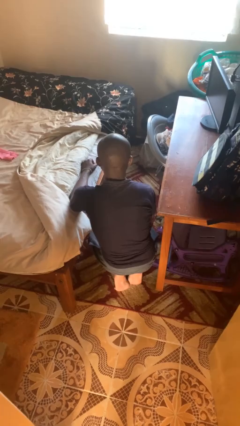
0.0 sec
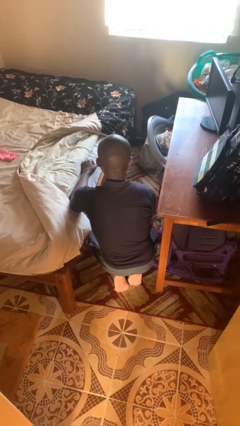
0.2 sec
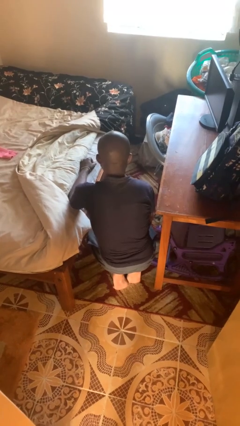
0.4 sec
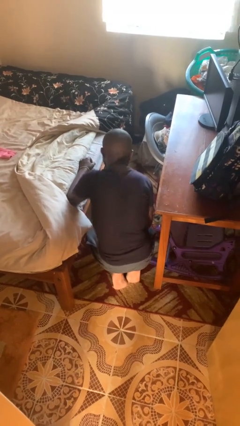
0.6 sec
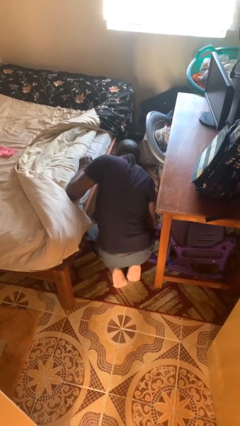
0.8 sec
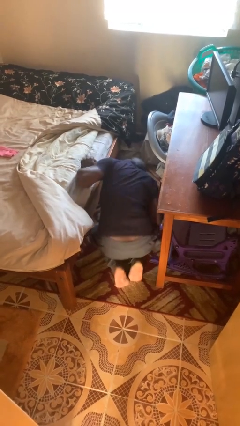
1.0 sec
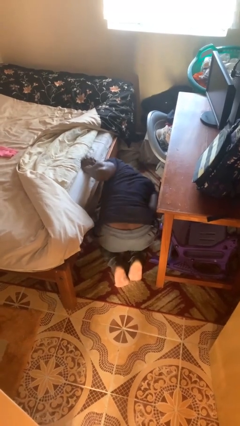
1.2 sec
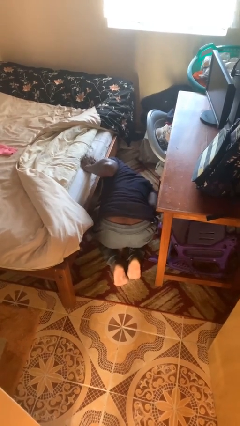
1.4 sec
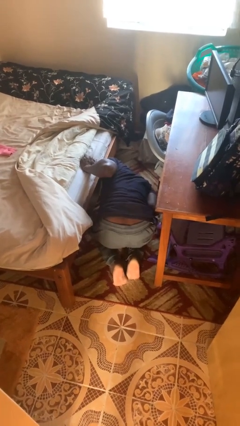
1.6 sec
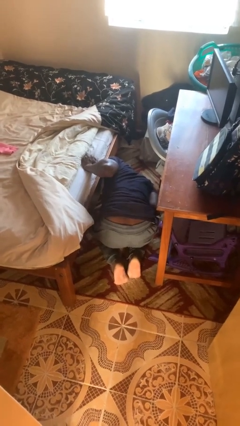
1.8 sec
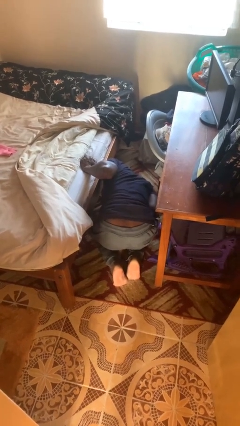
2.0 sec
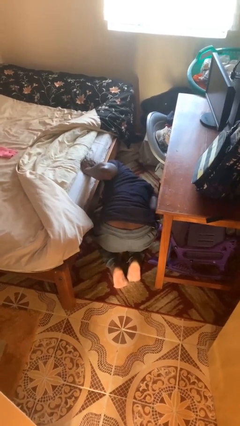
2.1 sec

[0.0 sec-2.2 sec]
person searches under bed

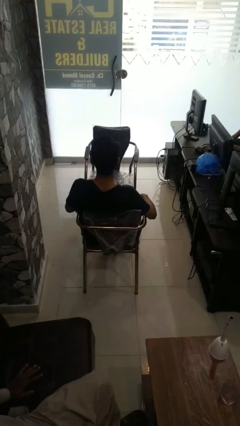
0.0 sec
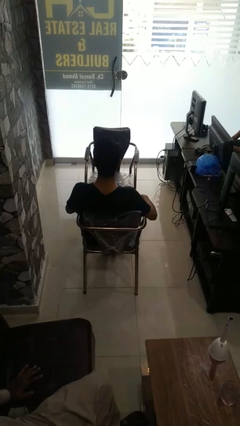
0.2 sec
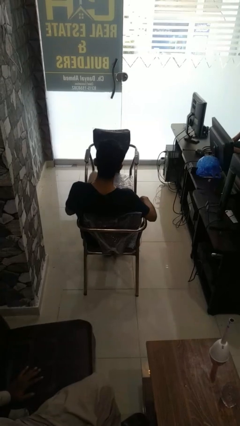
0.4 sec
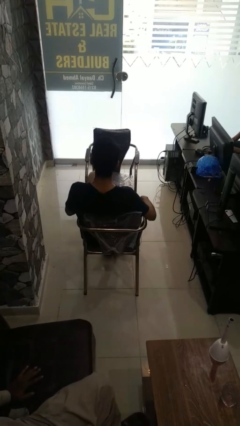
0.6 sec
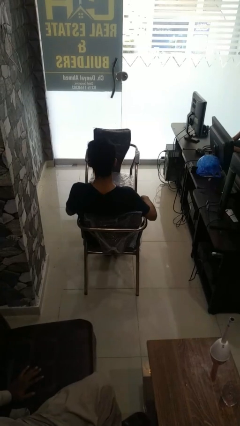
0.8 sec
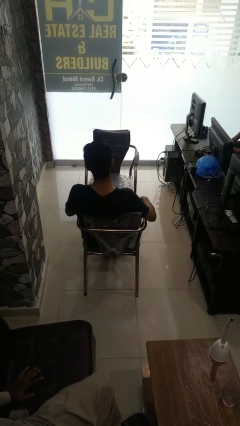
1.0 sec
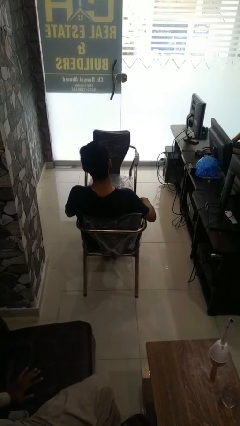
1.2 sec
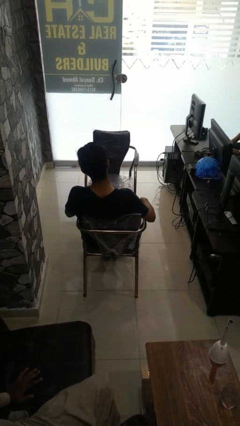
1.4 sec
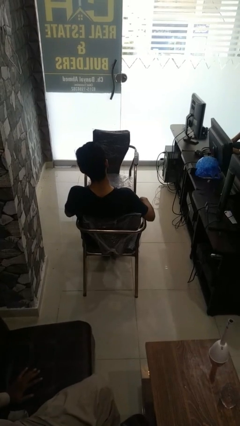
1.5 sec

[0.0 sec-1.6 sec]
person puts feet up

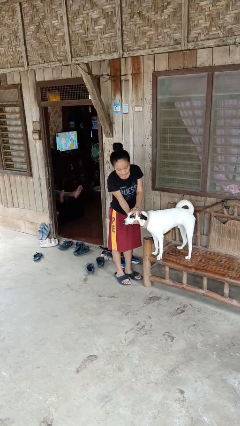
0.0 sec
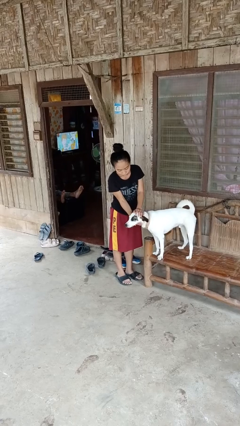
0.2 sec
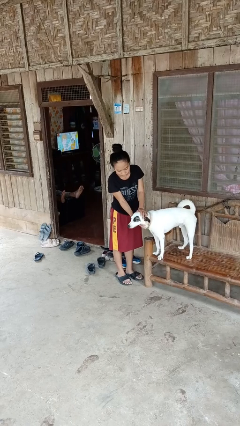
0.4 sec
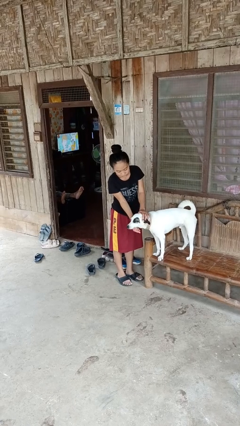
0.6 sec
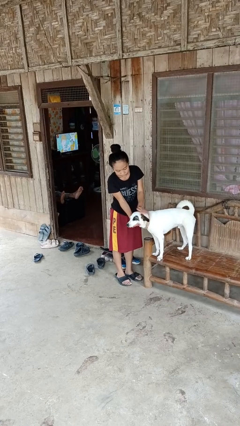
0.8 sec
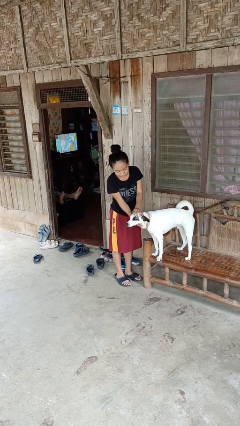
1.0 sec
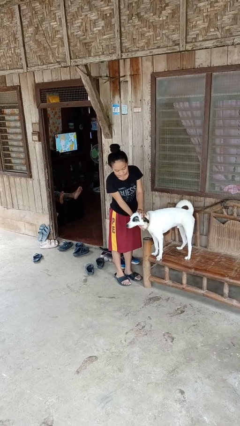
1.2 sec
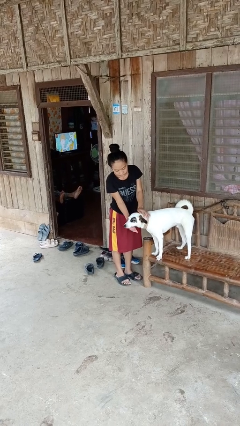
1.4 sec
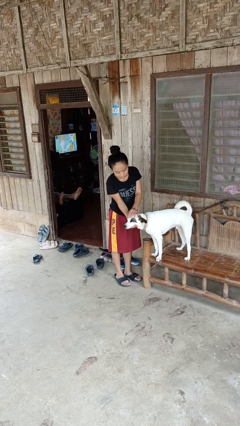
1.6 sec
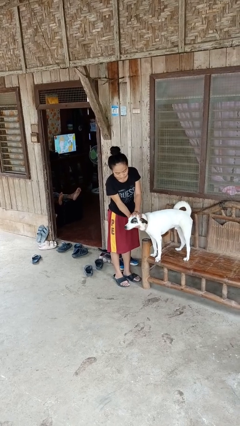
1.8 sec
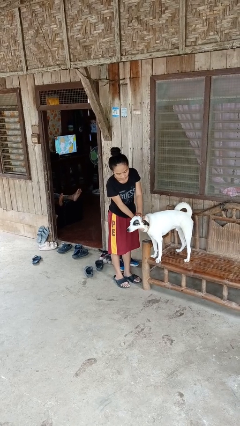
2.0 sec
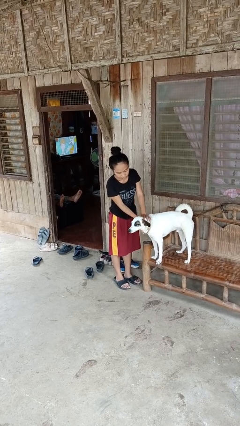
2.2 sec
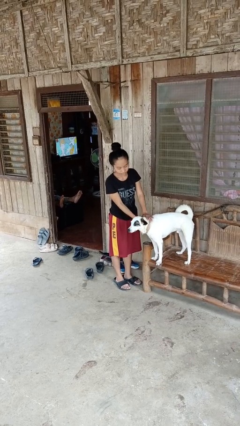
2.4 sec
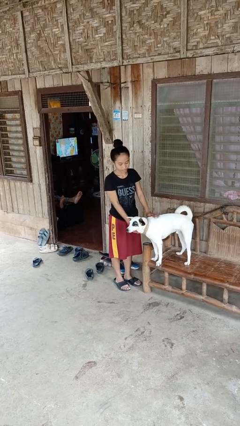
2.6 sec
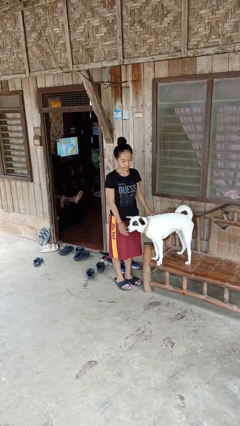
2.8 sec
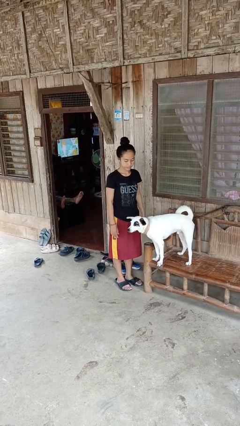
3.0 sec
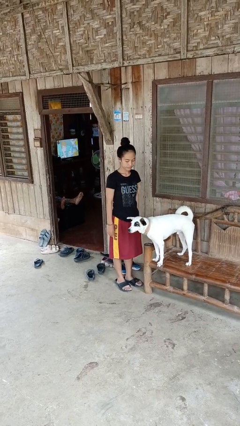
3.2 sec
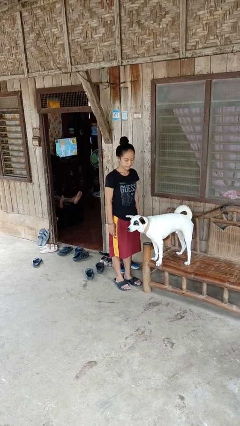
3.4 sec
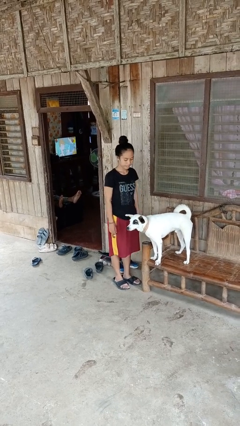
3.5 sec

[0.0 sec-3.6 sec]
person pets dog

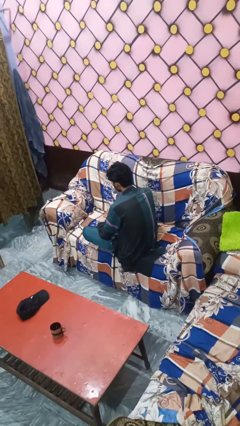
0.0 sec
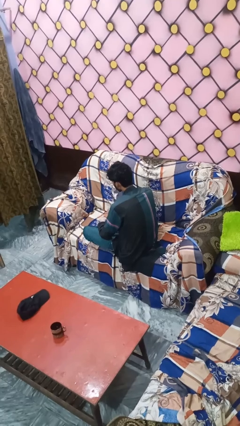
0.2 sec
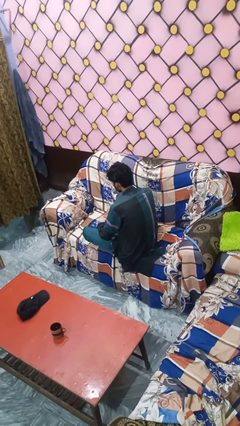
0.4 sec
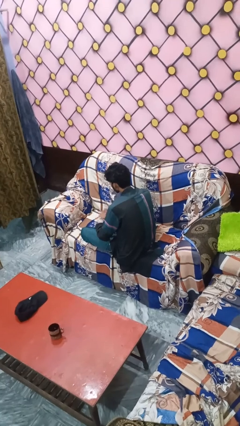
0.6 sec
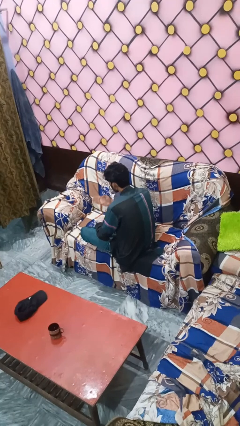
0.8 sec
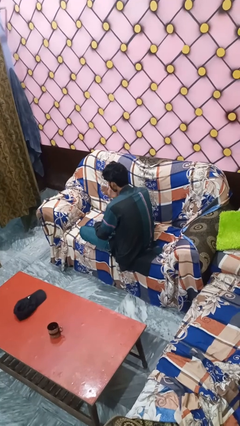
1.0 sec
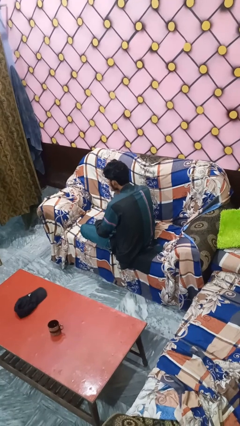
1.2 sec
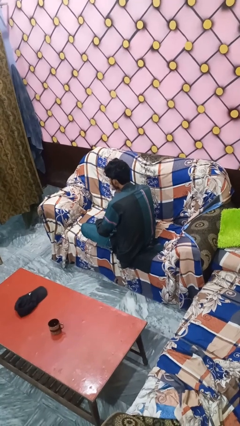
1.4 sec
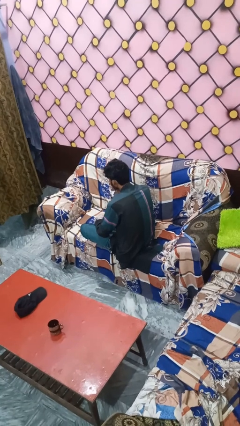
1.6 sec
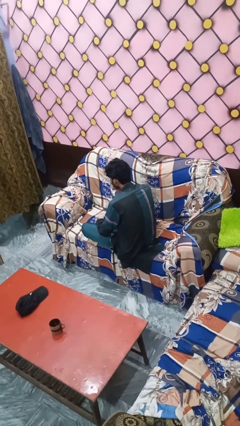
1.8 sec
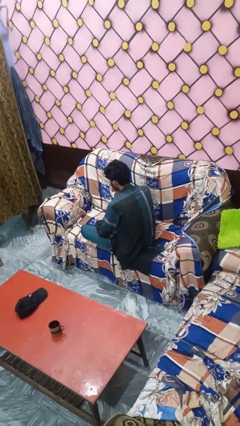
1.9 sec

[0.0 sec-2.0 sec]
person gestures blow kiss

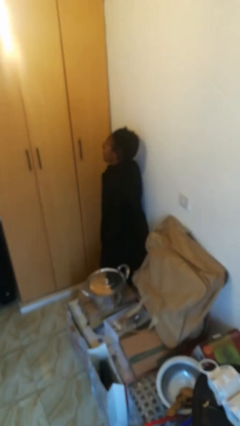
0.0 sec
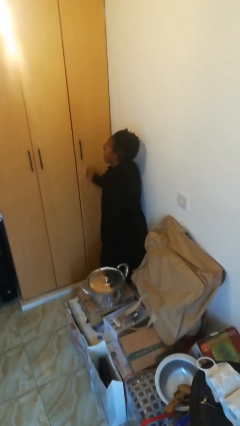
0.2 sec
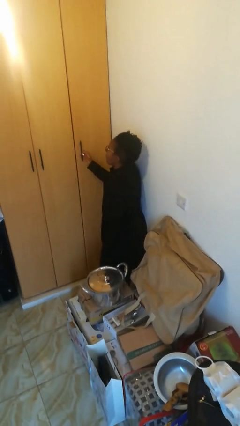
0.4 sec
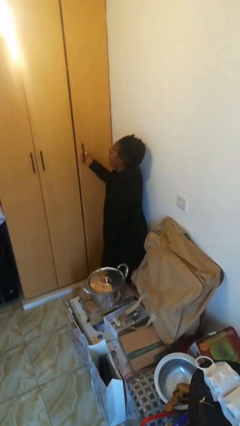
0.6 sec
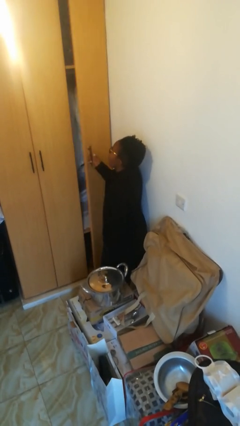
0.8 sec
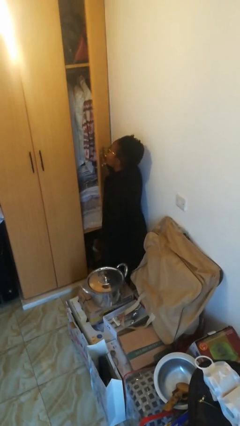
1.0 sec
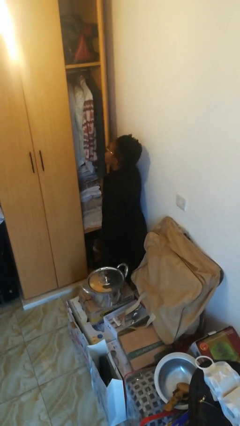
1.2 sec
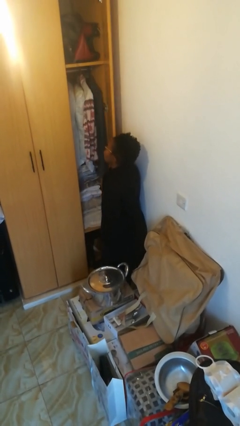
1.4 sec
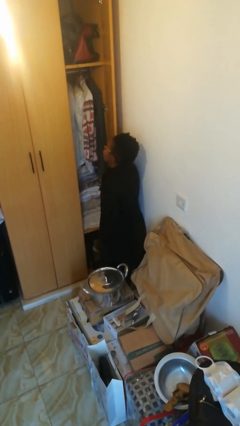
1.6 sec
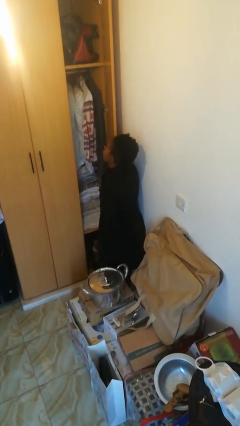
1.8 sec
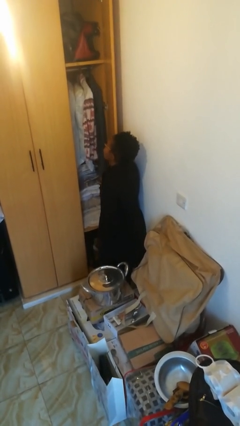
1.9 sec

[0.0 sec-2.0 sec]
person opens closet door

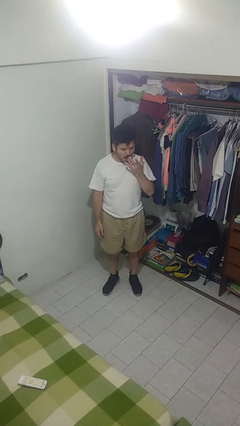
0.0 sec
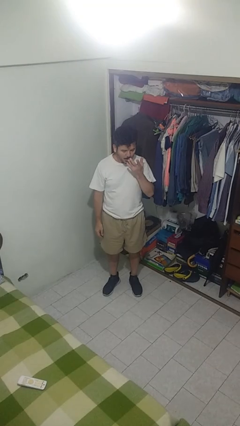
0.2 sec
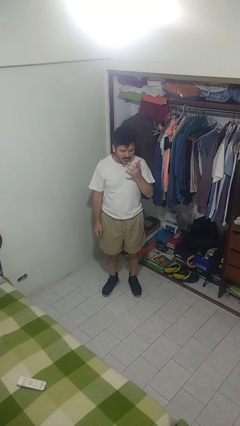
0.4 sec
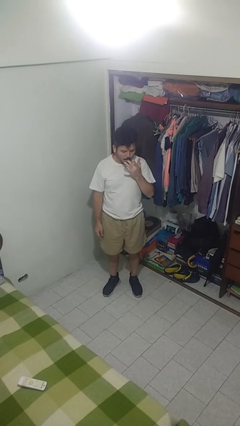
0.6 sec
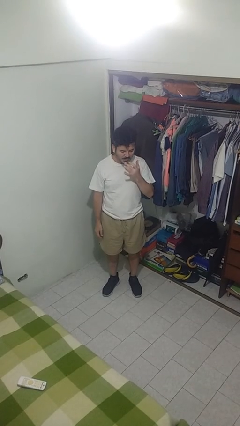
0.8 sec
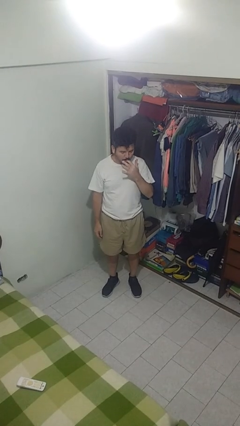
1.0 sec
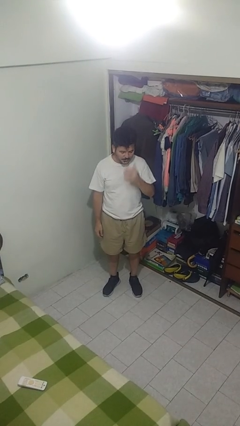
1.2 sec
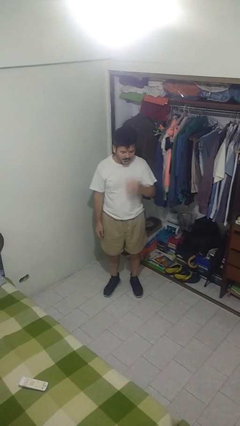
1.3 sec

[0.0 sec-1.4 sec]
person licks fingers

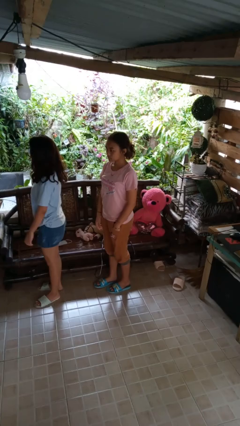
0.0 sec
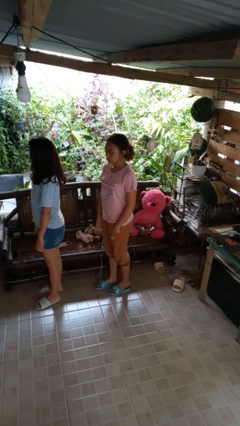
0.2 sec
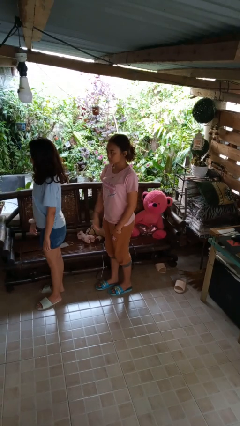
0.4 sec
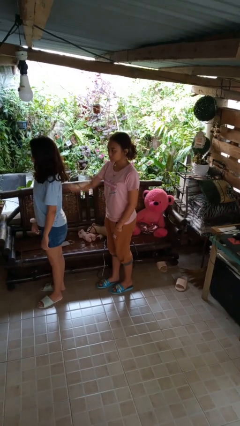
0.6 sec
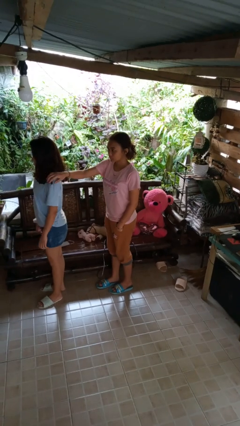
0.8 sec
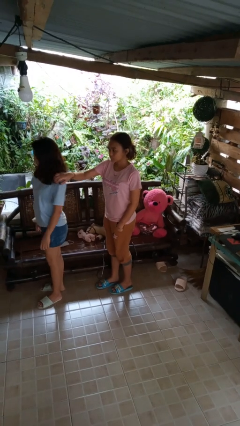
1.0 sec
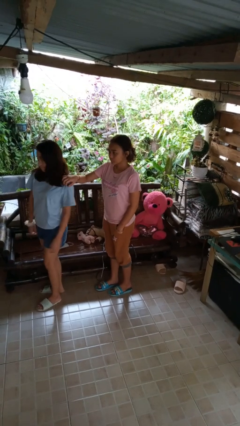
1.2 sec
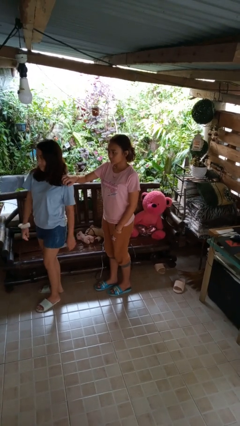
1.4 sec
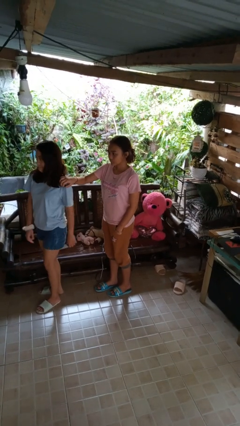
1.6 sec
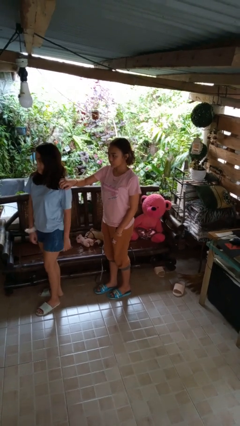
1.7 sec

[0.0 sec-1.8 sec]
person grabs person by shoulder

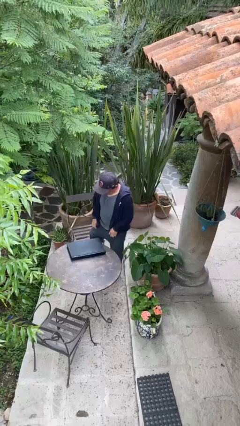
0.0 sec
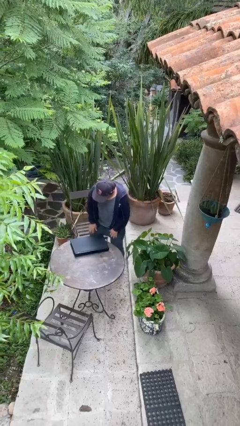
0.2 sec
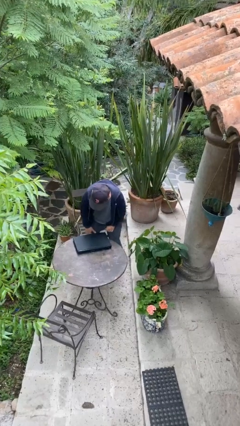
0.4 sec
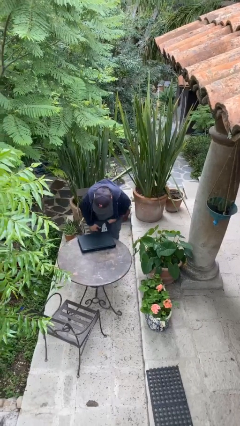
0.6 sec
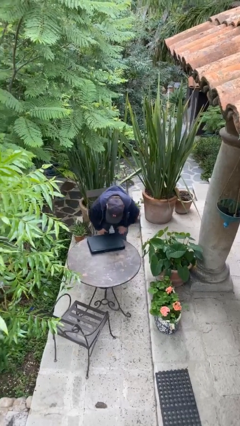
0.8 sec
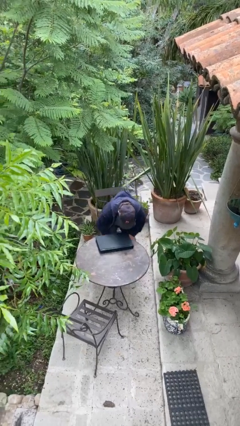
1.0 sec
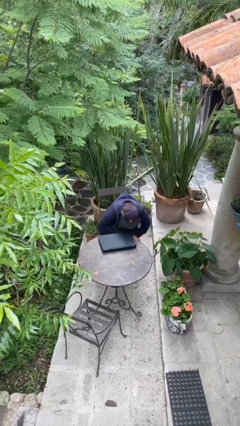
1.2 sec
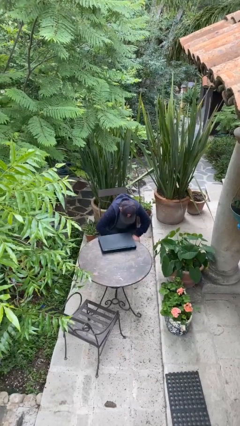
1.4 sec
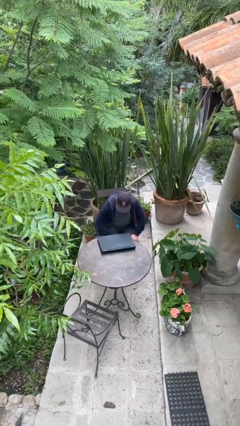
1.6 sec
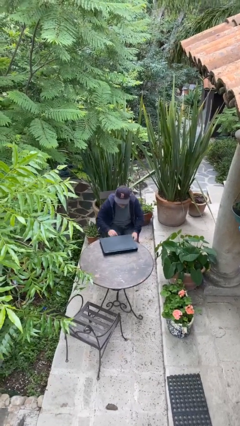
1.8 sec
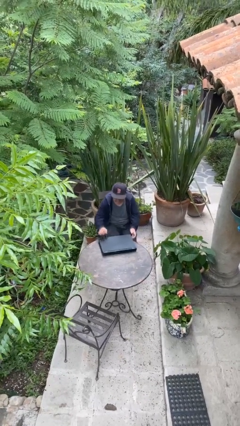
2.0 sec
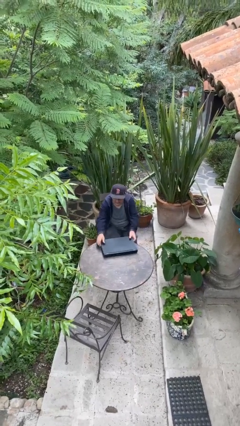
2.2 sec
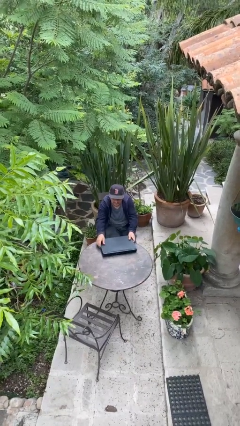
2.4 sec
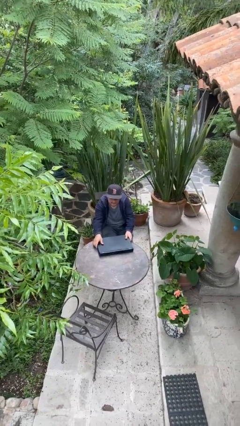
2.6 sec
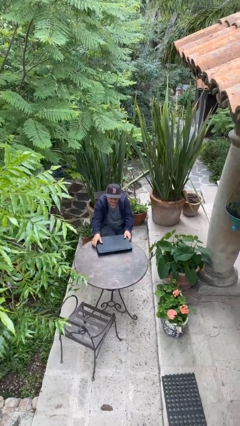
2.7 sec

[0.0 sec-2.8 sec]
person sits down
